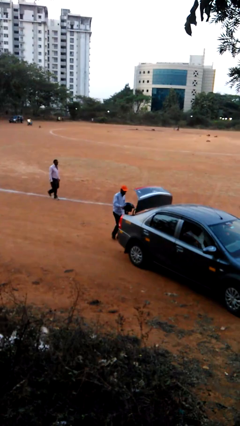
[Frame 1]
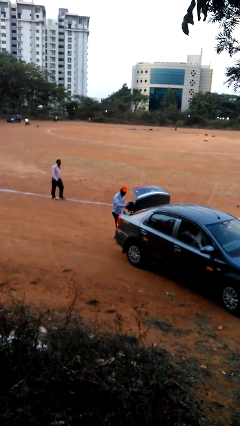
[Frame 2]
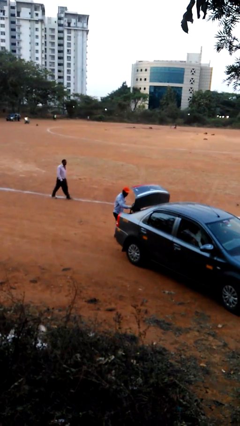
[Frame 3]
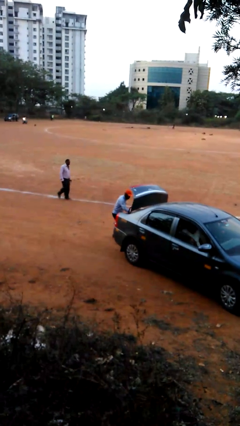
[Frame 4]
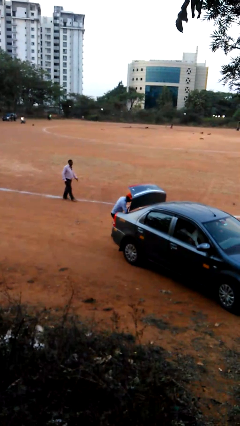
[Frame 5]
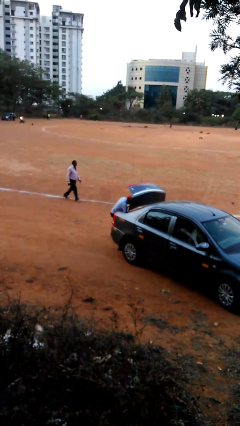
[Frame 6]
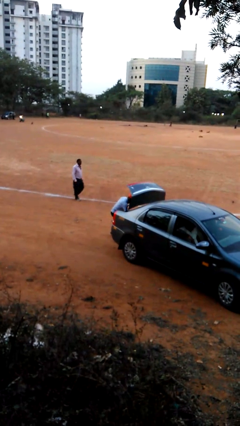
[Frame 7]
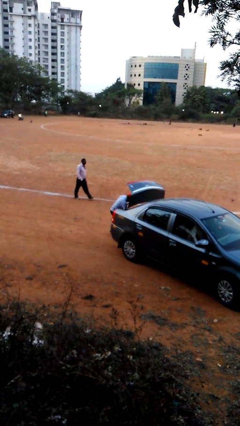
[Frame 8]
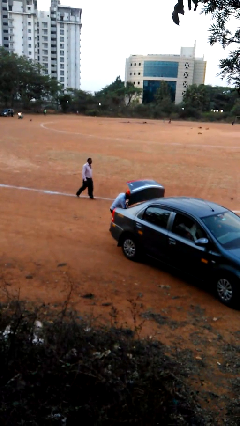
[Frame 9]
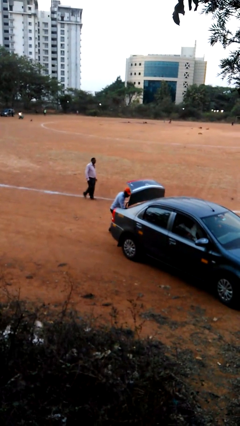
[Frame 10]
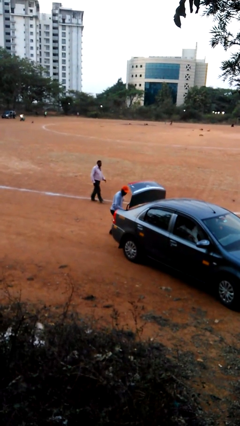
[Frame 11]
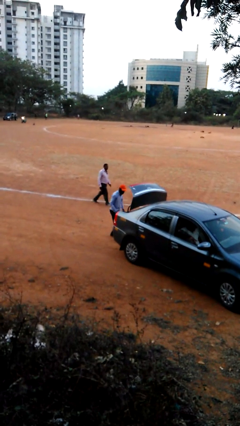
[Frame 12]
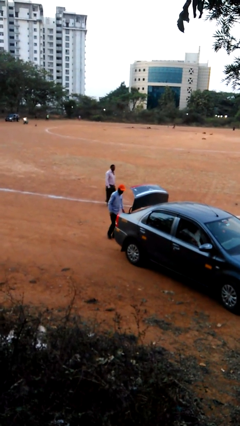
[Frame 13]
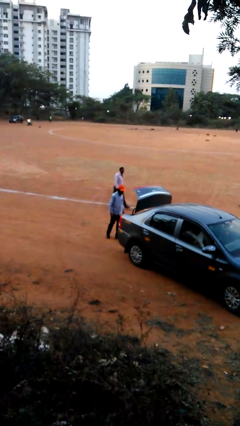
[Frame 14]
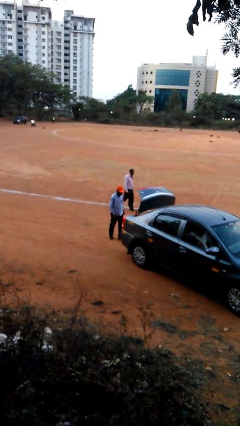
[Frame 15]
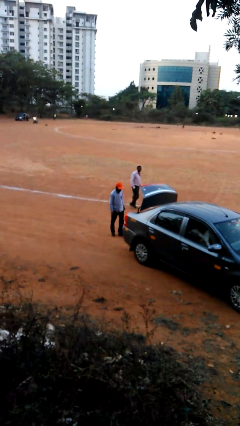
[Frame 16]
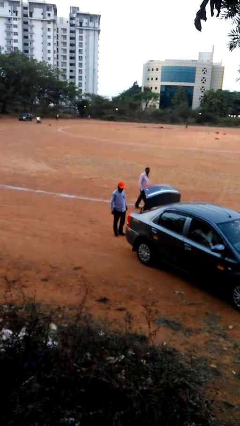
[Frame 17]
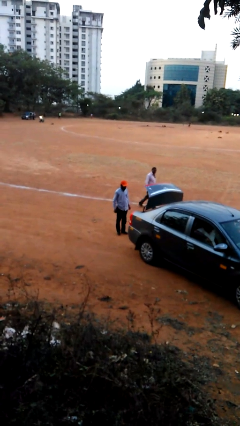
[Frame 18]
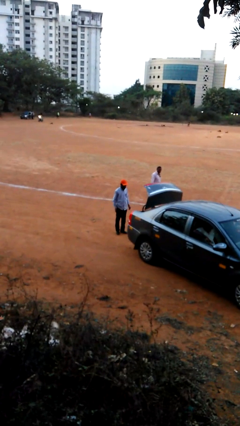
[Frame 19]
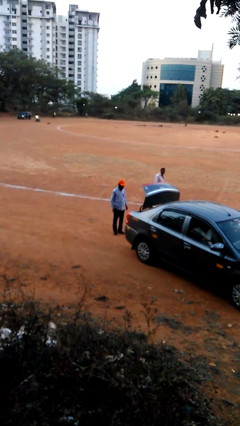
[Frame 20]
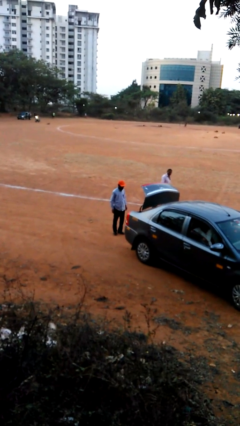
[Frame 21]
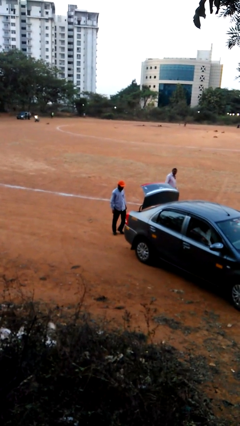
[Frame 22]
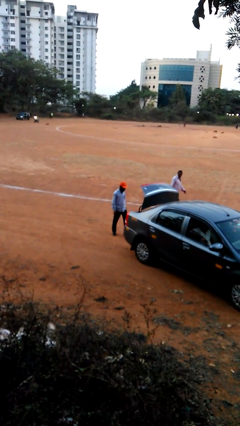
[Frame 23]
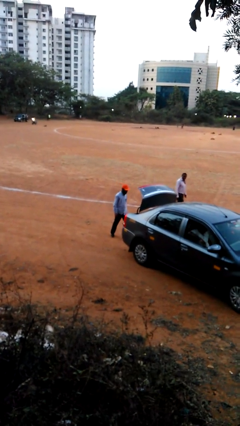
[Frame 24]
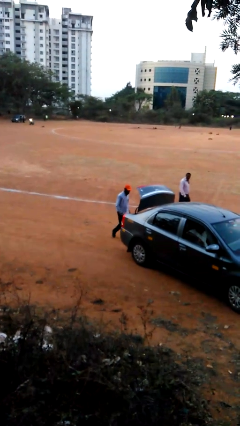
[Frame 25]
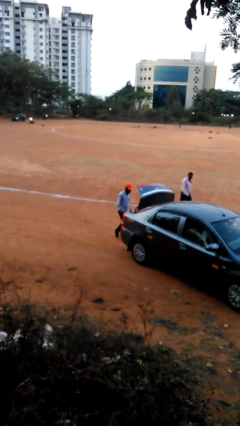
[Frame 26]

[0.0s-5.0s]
person loads car

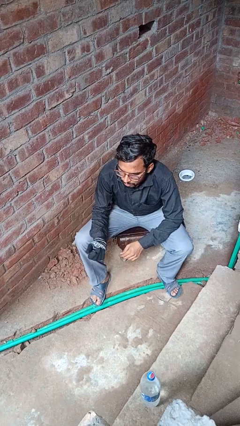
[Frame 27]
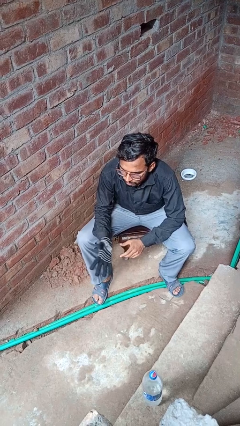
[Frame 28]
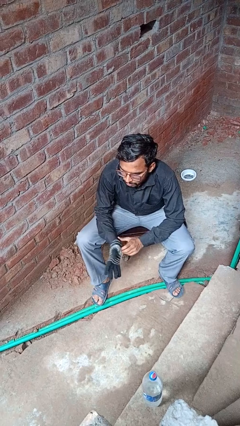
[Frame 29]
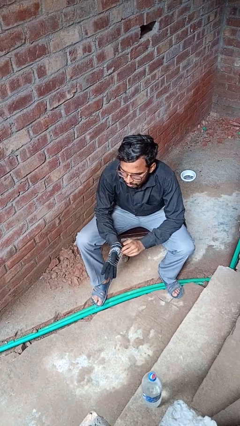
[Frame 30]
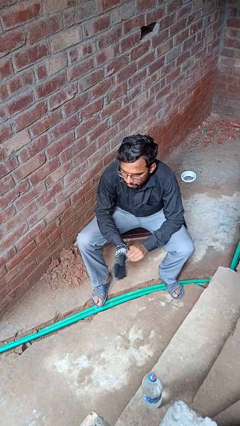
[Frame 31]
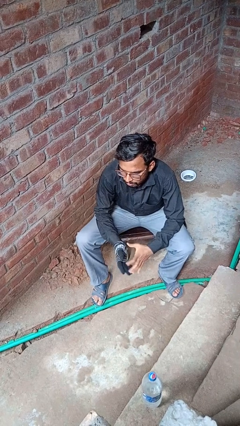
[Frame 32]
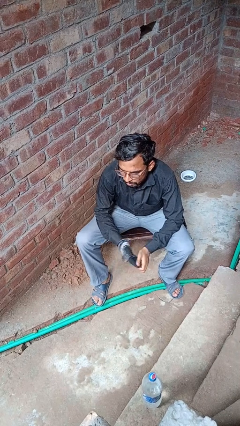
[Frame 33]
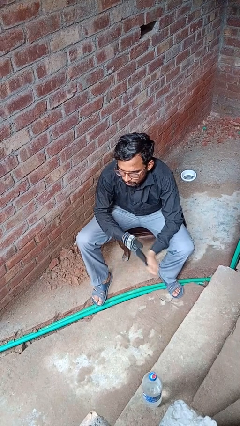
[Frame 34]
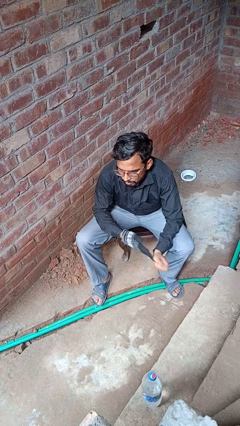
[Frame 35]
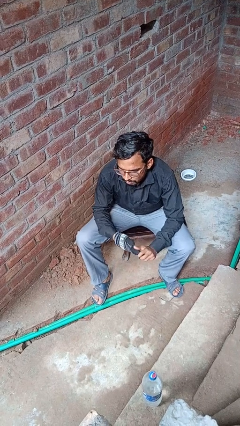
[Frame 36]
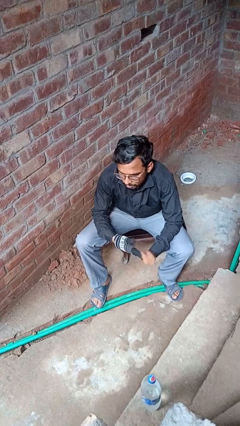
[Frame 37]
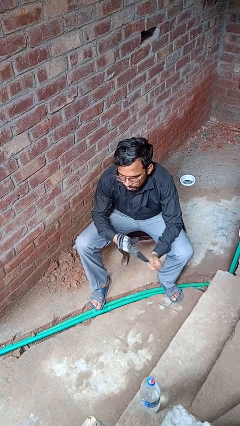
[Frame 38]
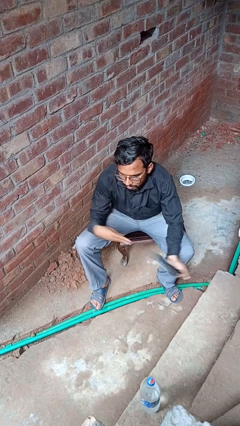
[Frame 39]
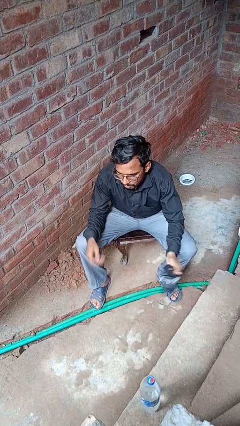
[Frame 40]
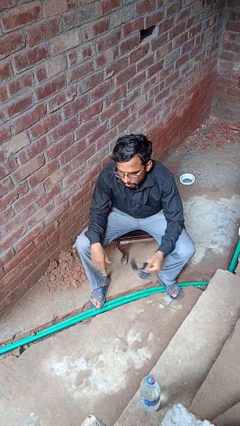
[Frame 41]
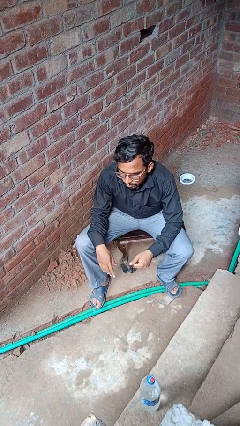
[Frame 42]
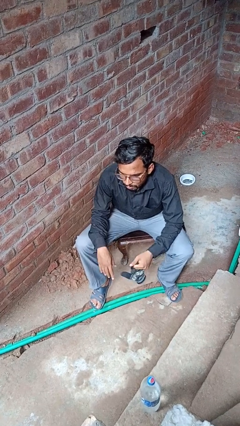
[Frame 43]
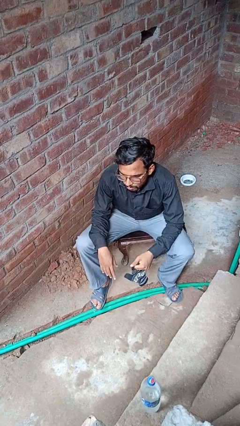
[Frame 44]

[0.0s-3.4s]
person takes off gloves

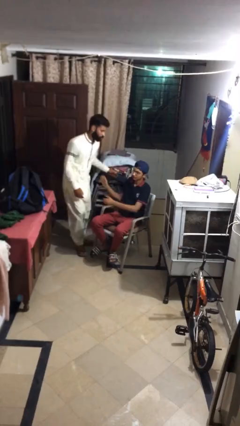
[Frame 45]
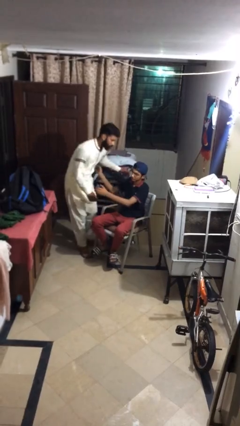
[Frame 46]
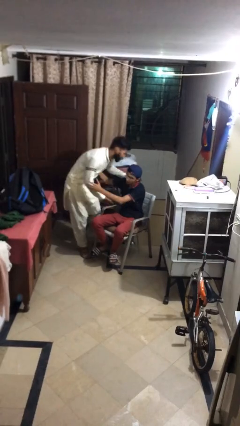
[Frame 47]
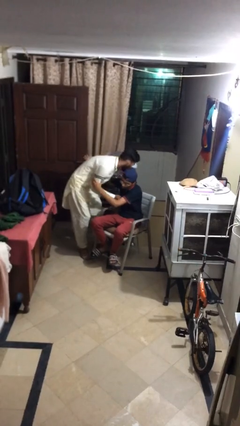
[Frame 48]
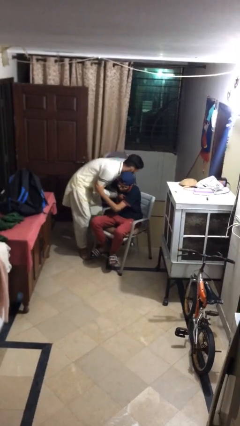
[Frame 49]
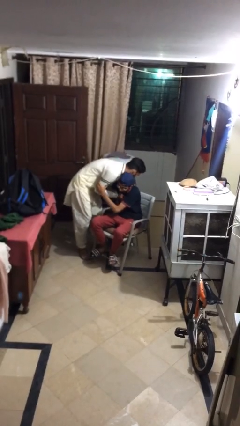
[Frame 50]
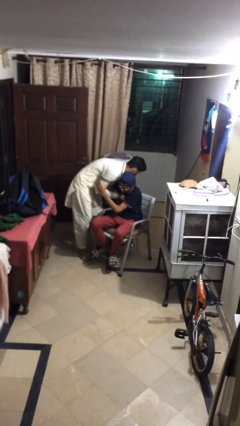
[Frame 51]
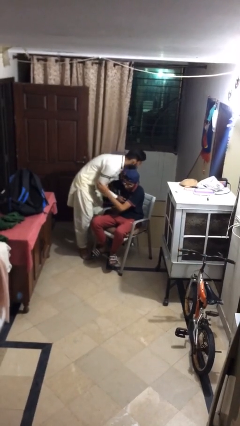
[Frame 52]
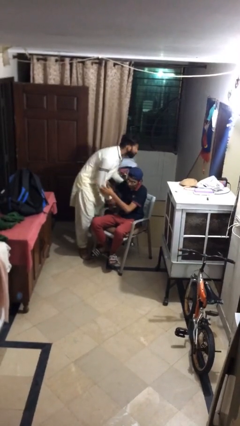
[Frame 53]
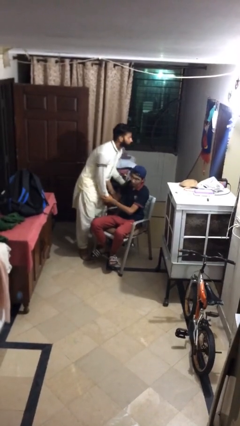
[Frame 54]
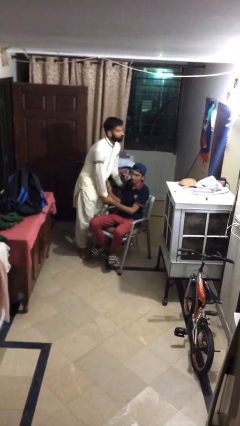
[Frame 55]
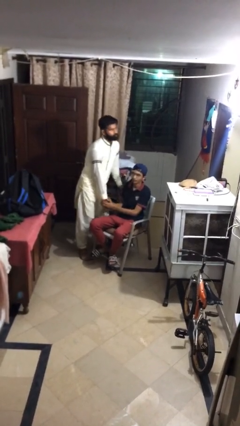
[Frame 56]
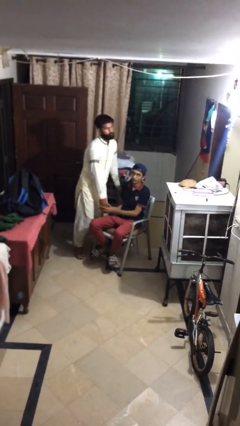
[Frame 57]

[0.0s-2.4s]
person embraces person

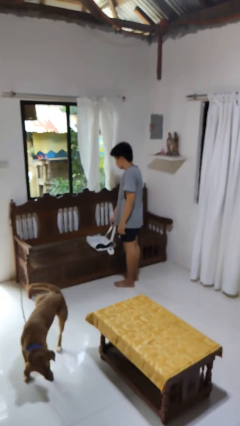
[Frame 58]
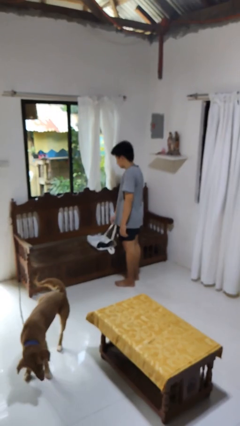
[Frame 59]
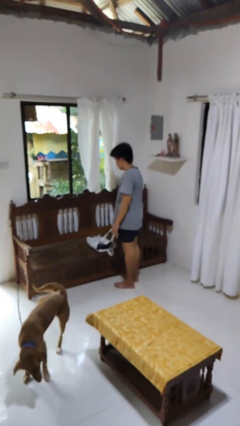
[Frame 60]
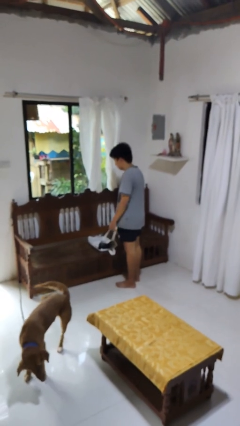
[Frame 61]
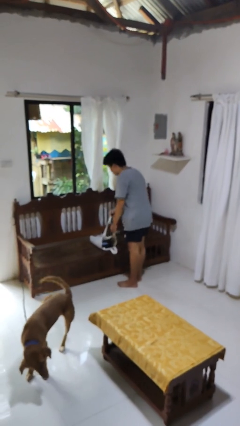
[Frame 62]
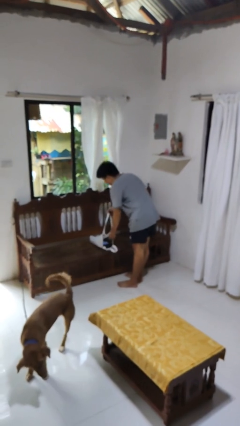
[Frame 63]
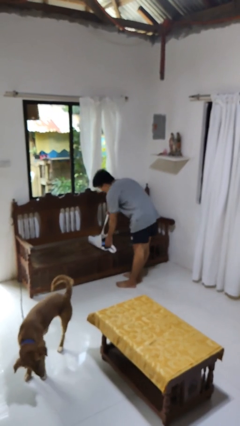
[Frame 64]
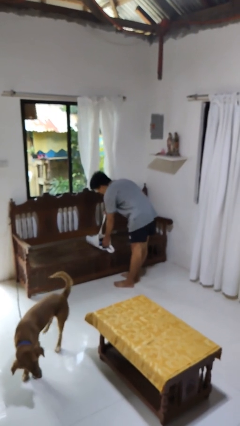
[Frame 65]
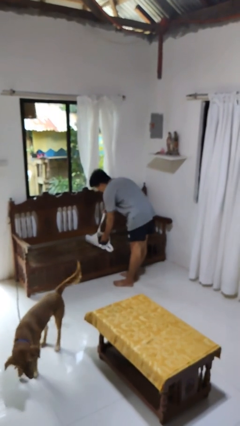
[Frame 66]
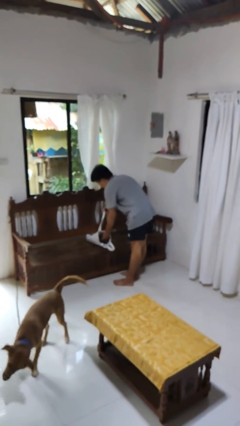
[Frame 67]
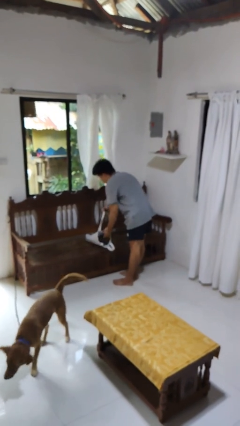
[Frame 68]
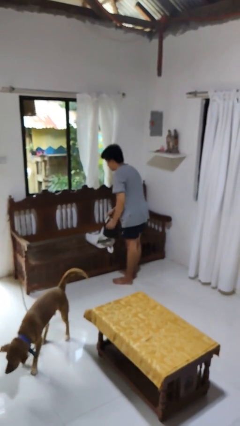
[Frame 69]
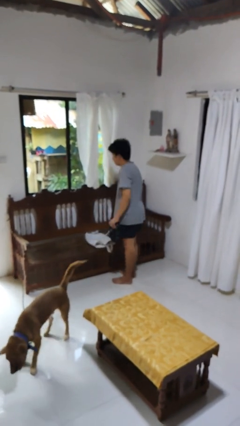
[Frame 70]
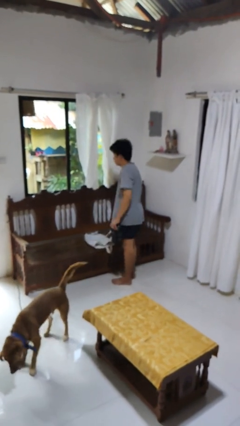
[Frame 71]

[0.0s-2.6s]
person takes object from bag

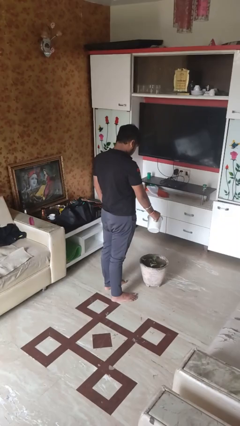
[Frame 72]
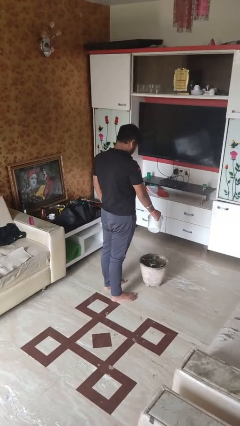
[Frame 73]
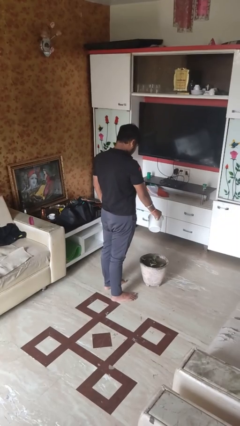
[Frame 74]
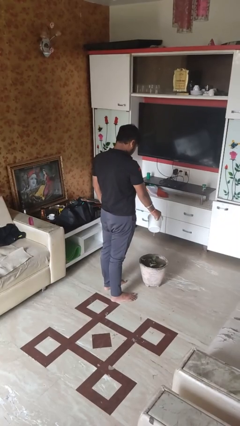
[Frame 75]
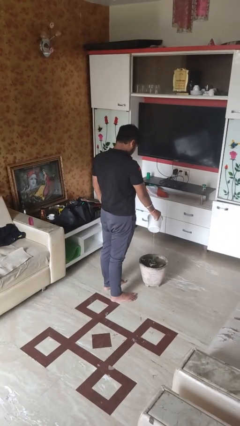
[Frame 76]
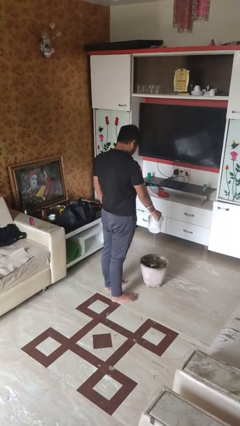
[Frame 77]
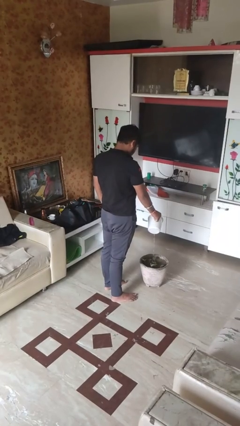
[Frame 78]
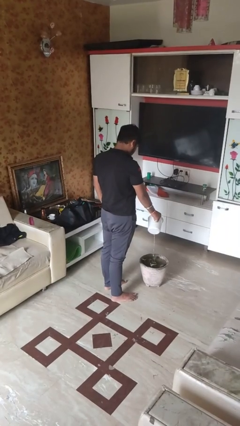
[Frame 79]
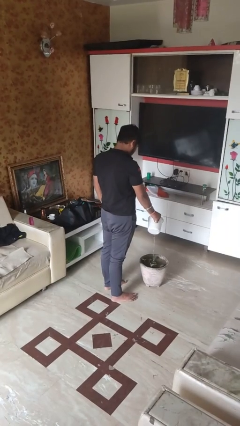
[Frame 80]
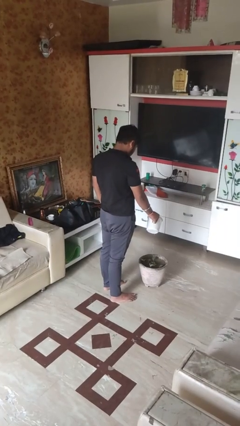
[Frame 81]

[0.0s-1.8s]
person waters houseplant

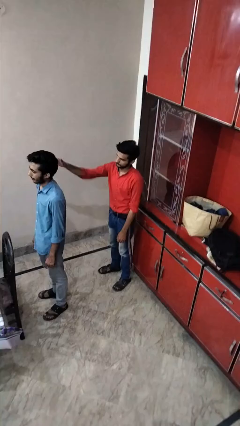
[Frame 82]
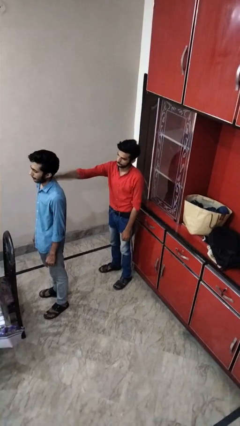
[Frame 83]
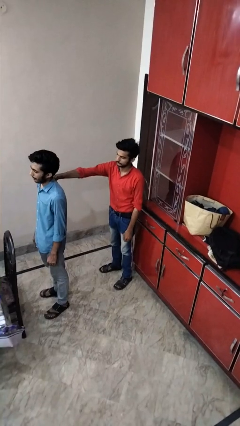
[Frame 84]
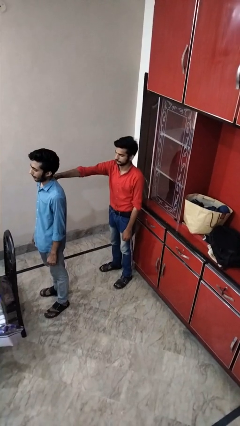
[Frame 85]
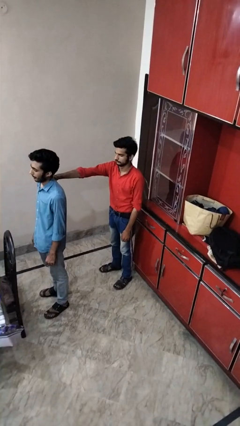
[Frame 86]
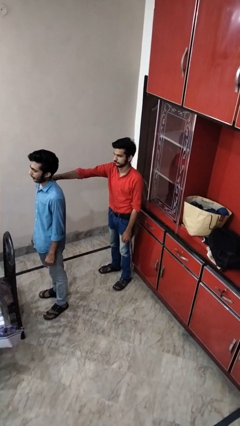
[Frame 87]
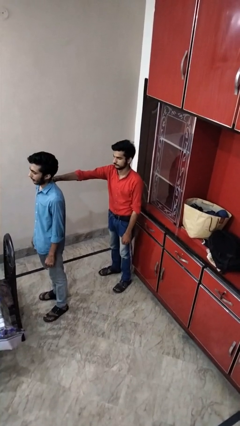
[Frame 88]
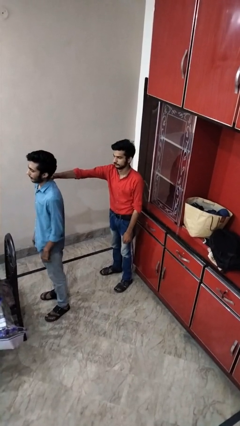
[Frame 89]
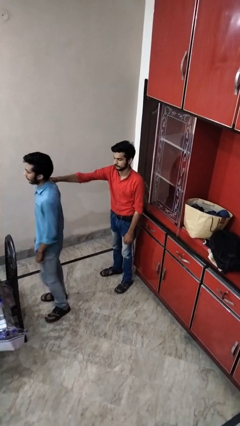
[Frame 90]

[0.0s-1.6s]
person grabs person by shoulder

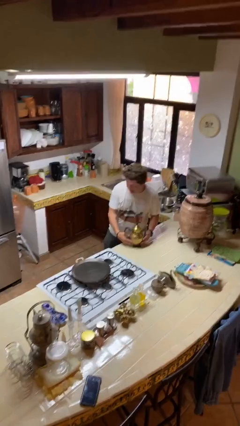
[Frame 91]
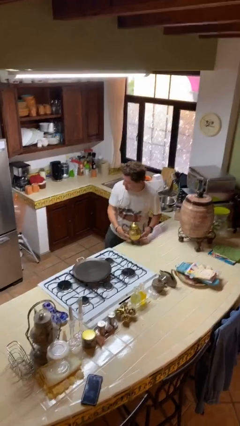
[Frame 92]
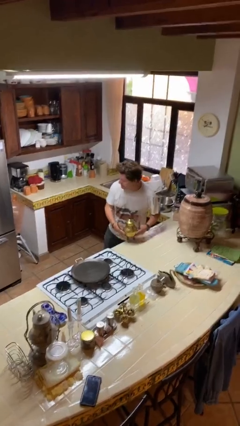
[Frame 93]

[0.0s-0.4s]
person picks up object from table
